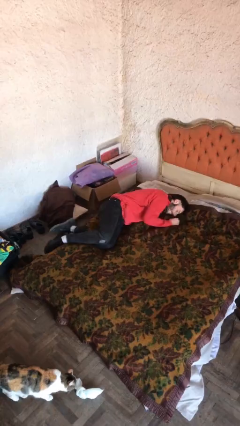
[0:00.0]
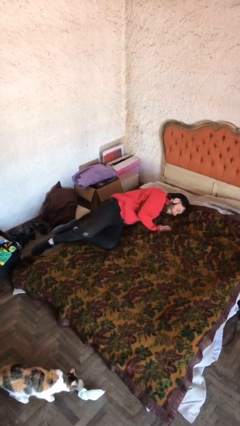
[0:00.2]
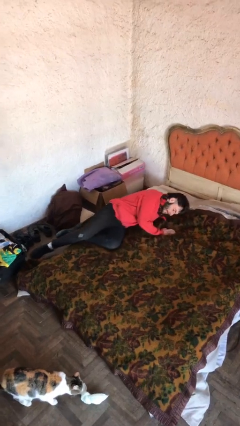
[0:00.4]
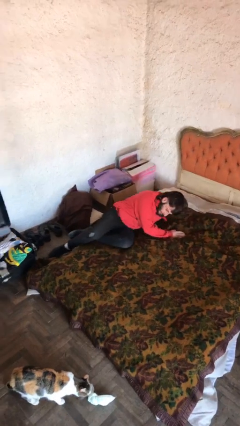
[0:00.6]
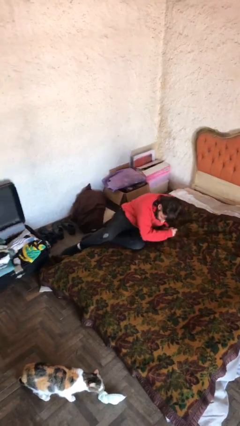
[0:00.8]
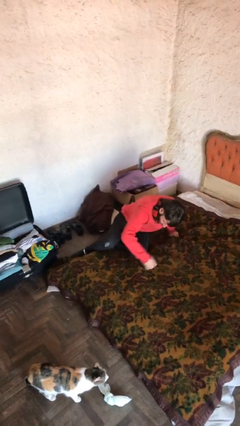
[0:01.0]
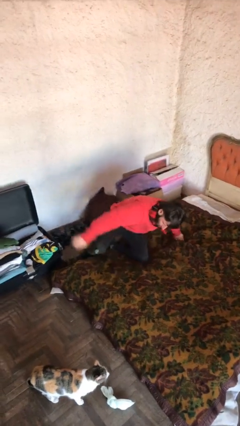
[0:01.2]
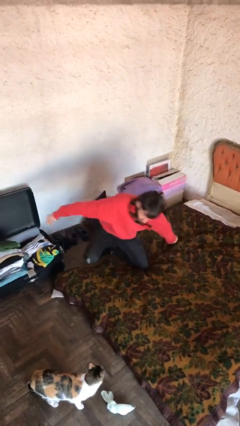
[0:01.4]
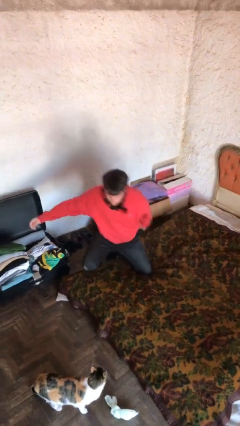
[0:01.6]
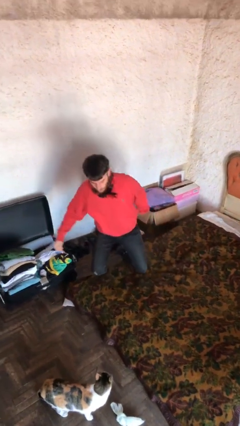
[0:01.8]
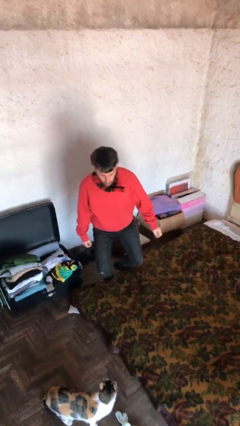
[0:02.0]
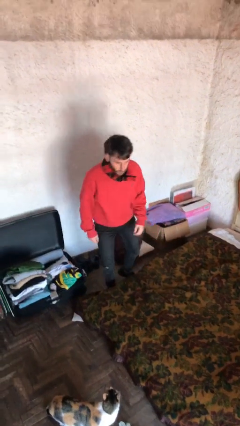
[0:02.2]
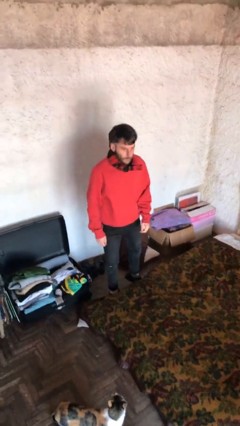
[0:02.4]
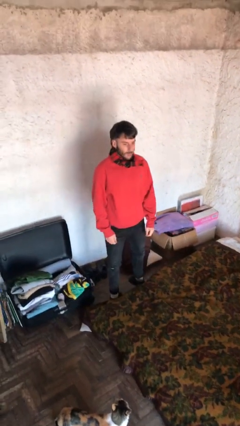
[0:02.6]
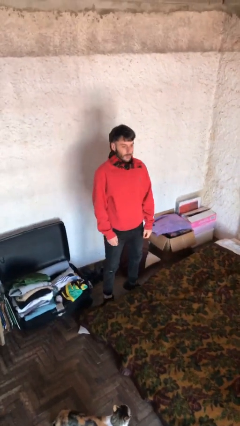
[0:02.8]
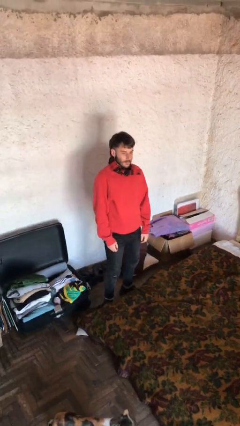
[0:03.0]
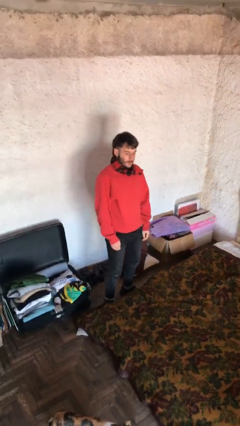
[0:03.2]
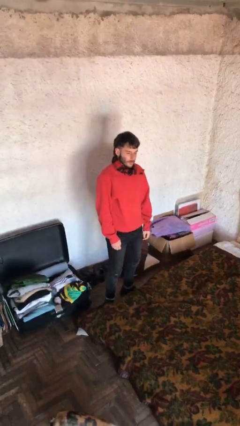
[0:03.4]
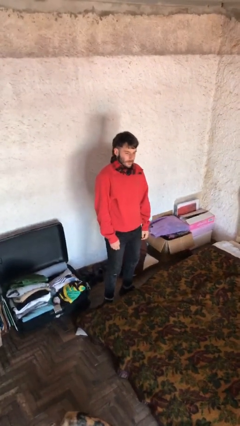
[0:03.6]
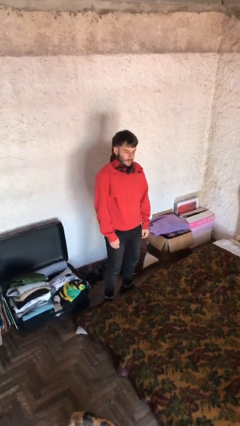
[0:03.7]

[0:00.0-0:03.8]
person stands up

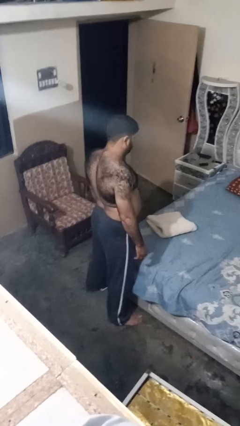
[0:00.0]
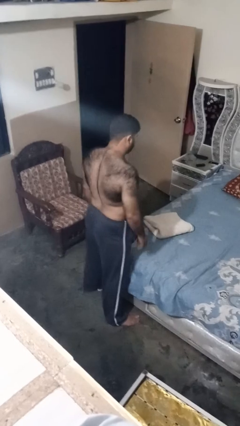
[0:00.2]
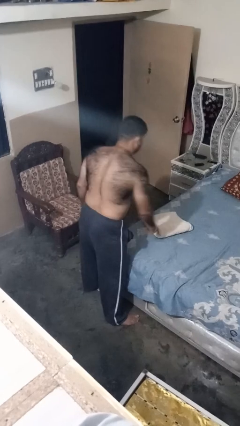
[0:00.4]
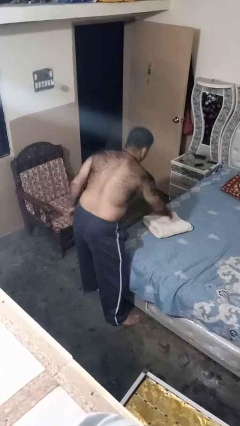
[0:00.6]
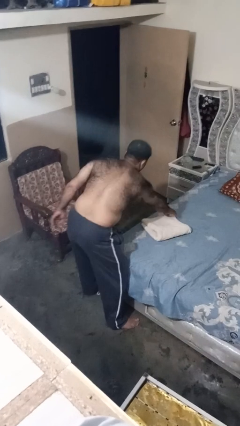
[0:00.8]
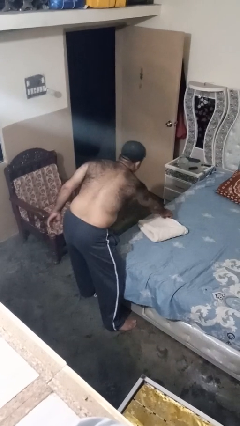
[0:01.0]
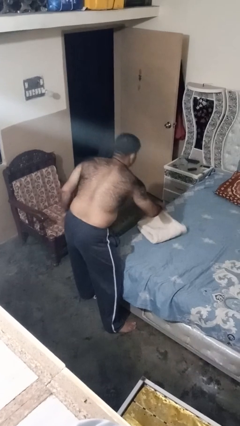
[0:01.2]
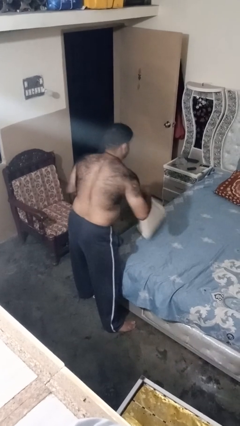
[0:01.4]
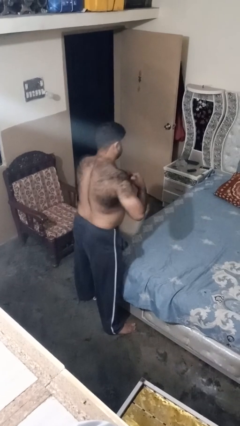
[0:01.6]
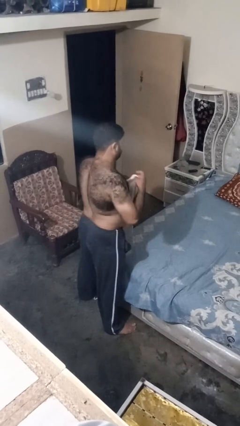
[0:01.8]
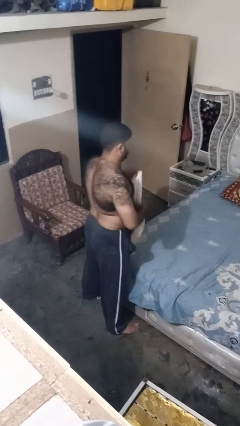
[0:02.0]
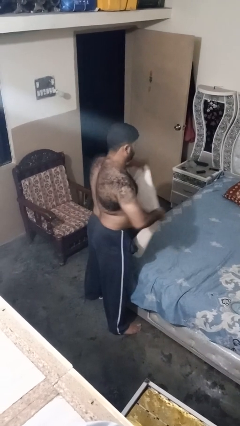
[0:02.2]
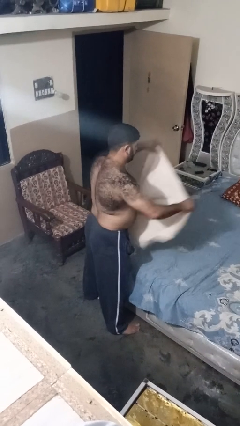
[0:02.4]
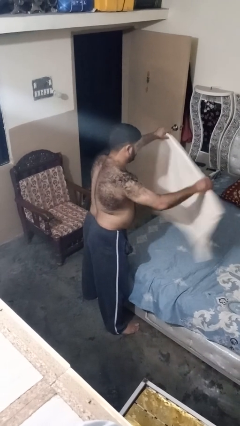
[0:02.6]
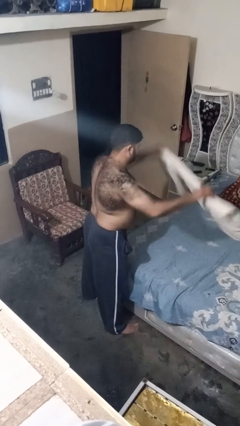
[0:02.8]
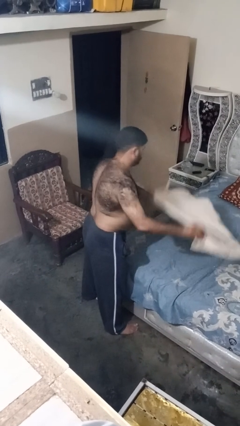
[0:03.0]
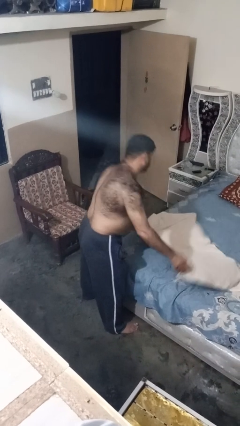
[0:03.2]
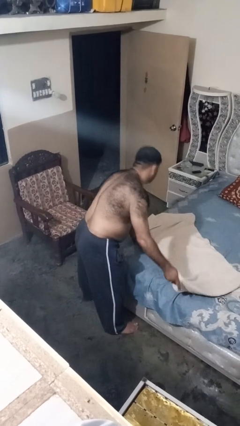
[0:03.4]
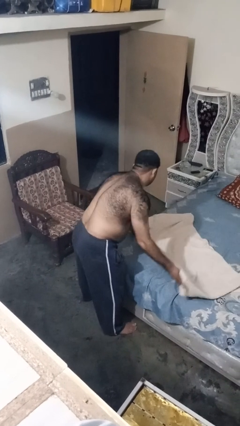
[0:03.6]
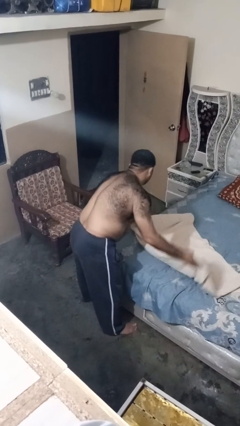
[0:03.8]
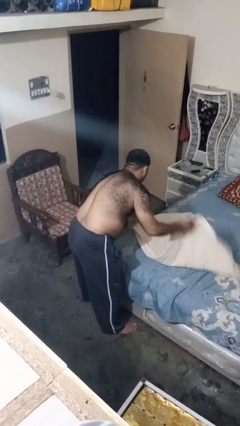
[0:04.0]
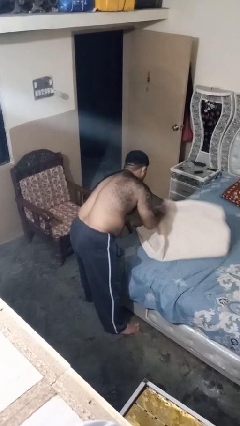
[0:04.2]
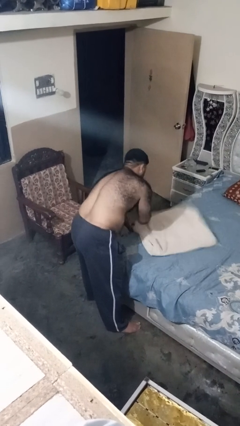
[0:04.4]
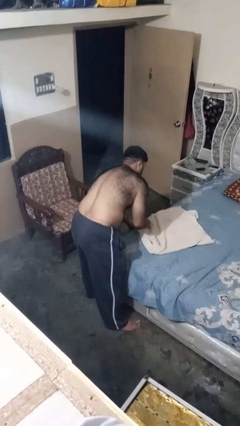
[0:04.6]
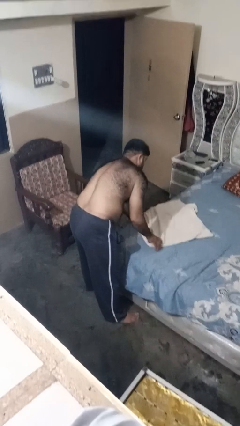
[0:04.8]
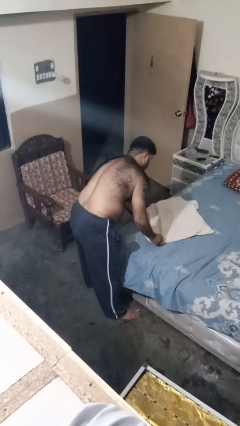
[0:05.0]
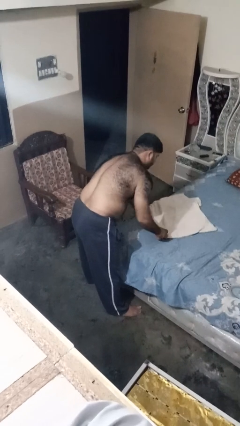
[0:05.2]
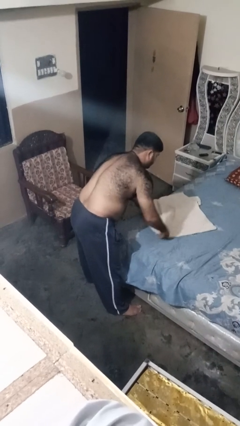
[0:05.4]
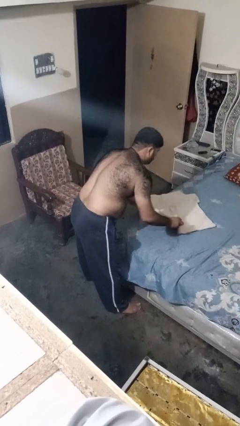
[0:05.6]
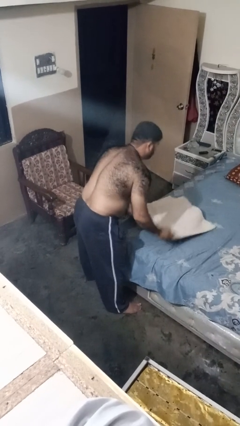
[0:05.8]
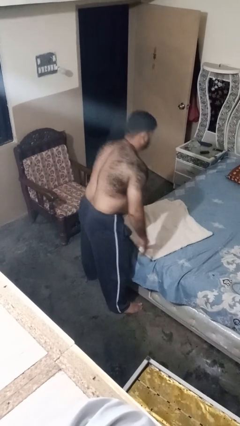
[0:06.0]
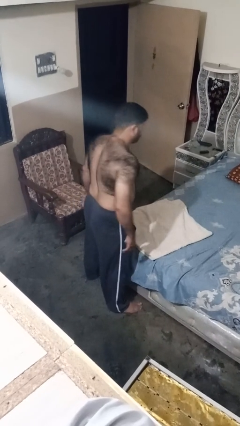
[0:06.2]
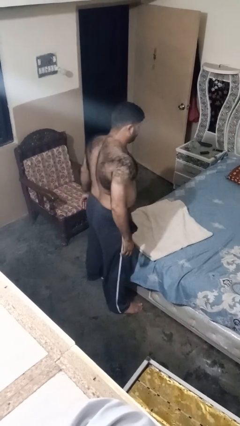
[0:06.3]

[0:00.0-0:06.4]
person folds towel

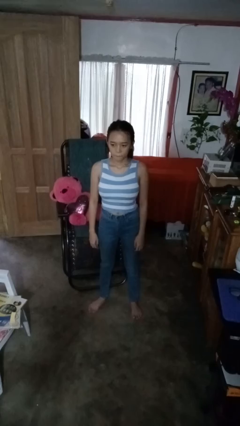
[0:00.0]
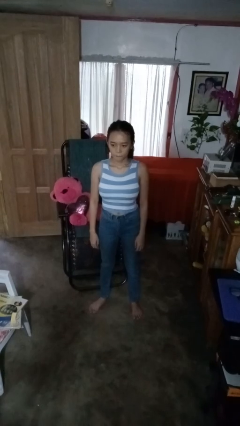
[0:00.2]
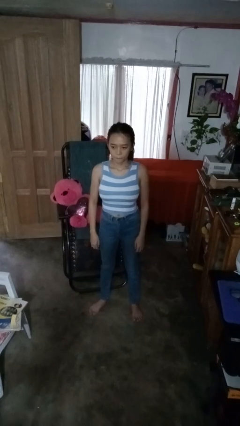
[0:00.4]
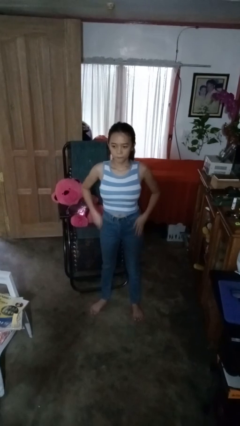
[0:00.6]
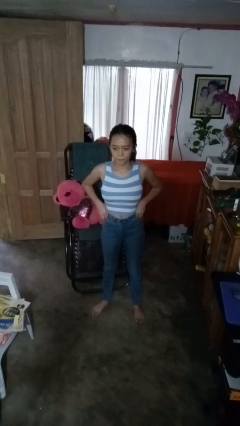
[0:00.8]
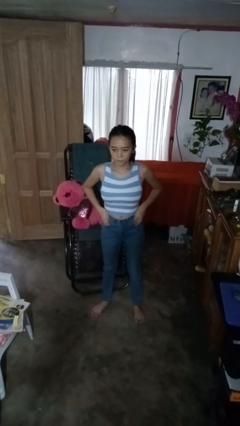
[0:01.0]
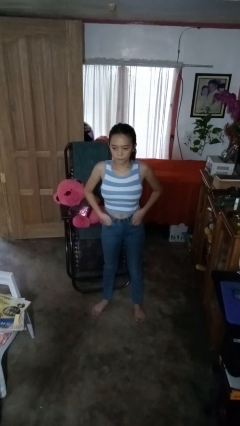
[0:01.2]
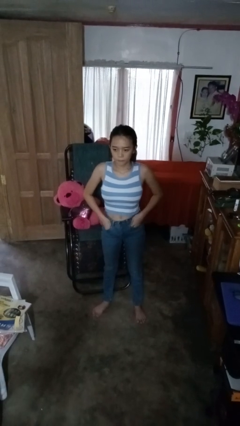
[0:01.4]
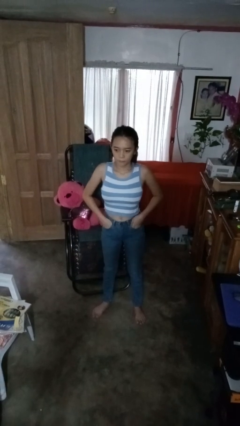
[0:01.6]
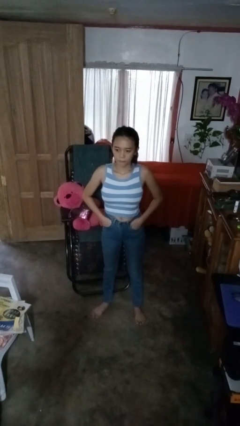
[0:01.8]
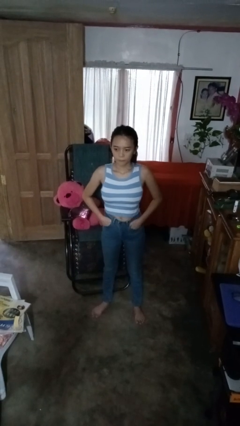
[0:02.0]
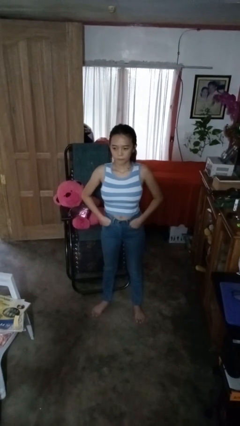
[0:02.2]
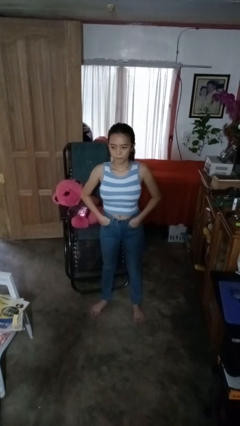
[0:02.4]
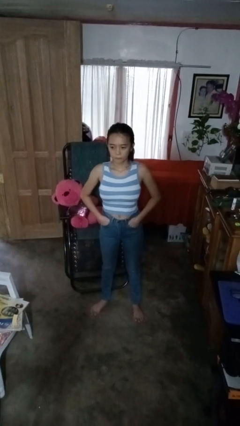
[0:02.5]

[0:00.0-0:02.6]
person puts hands in back pockets

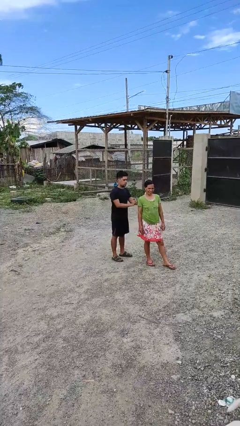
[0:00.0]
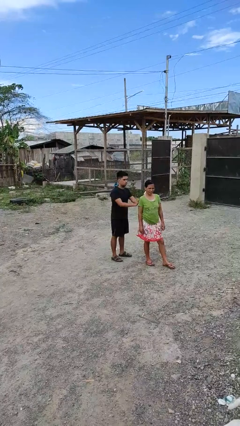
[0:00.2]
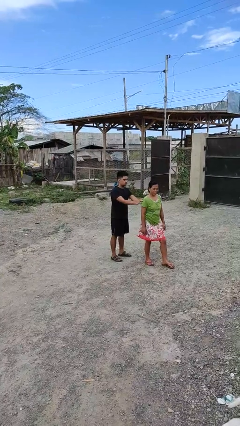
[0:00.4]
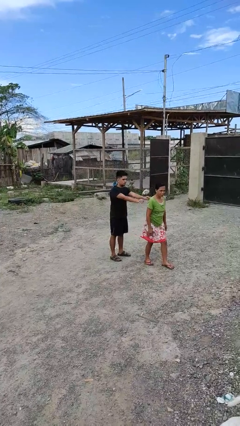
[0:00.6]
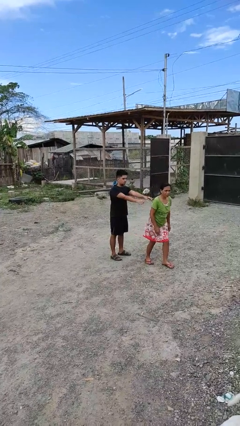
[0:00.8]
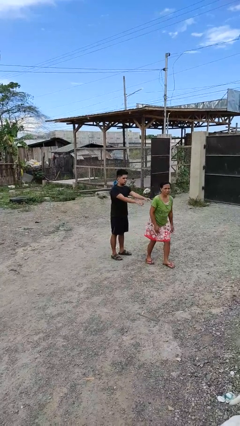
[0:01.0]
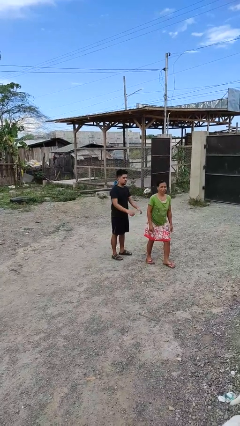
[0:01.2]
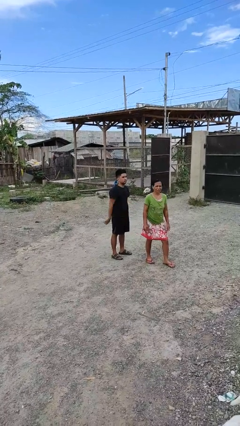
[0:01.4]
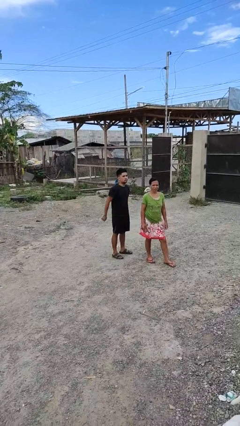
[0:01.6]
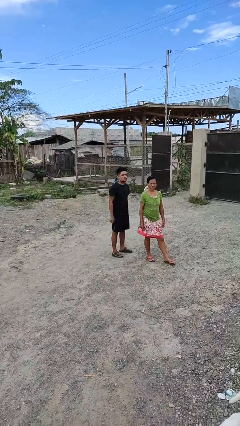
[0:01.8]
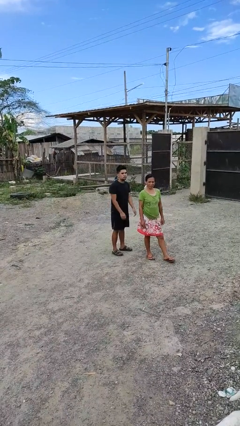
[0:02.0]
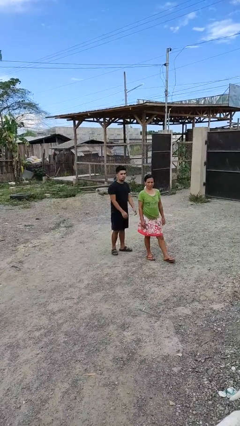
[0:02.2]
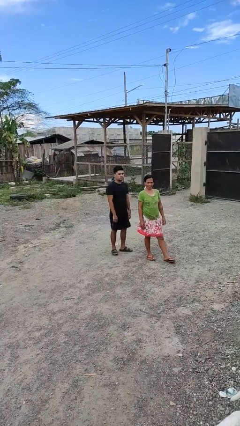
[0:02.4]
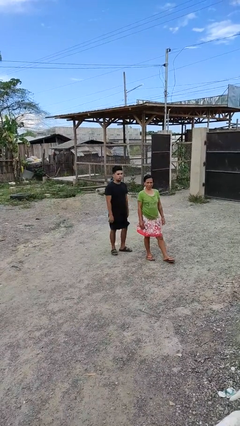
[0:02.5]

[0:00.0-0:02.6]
person shoves person

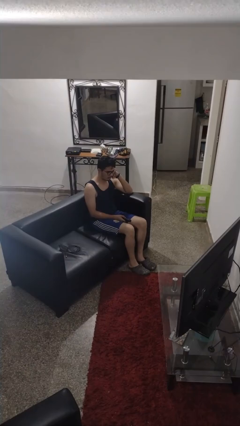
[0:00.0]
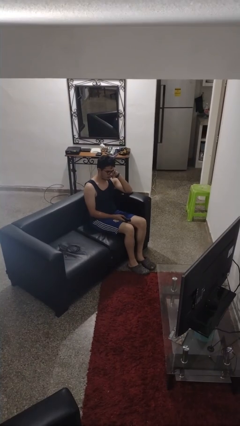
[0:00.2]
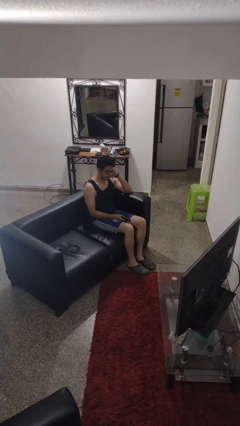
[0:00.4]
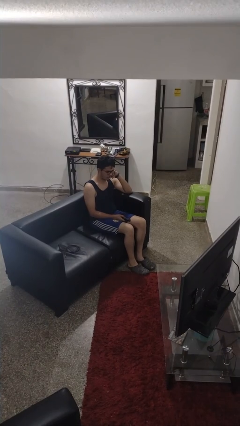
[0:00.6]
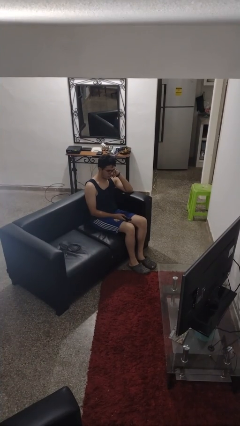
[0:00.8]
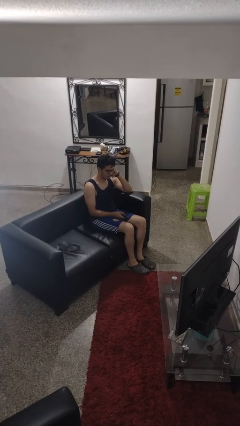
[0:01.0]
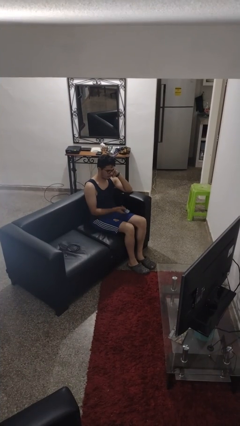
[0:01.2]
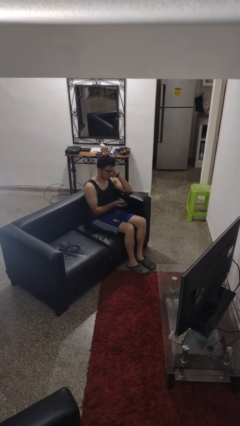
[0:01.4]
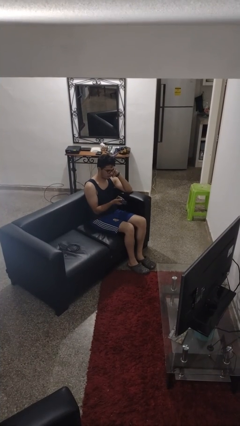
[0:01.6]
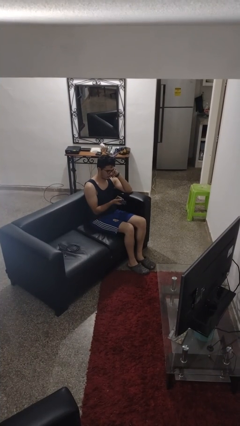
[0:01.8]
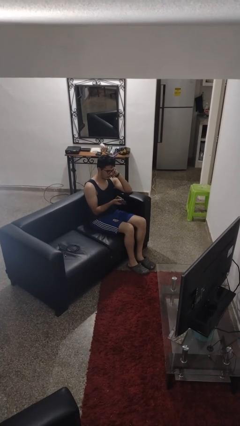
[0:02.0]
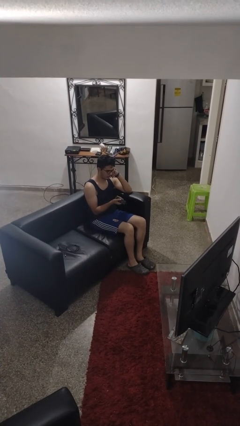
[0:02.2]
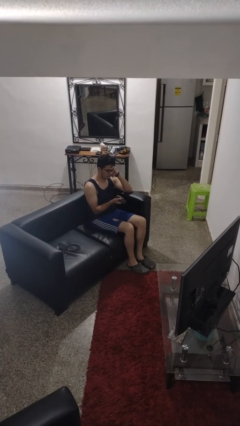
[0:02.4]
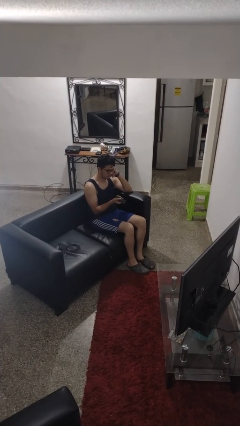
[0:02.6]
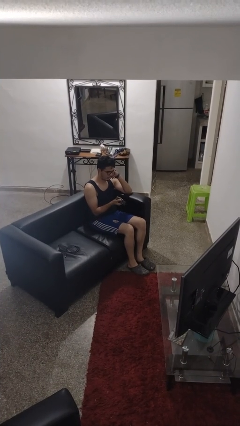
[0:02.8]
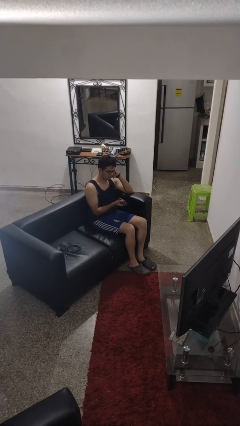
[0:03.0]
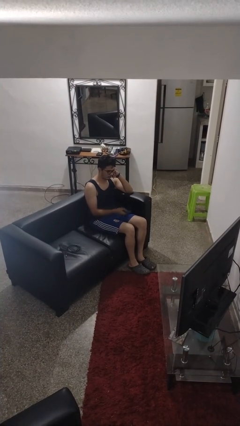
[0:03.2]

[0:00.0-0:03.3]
person uses television remote
